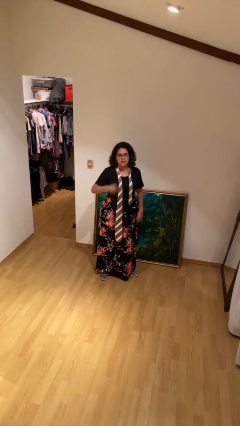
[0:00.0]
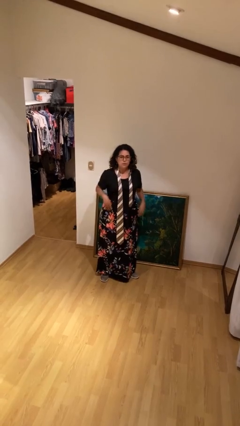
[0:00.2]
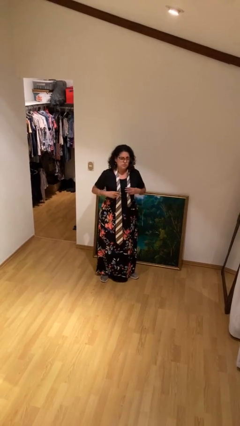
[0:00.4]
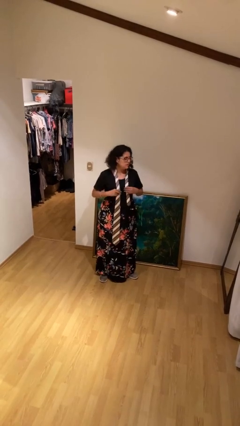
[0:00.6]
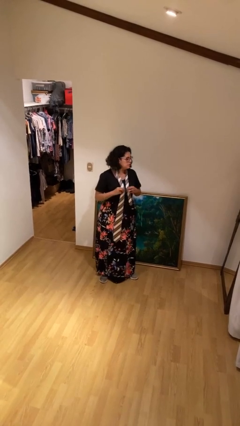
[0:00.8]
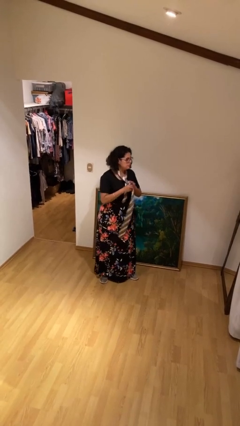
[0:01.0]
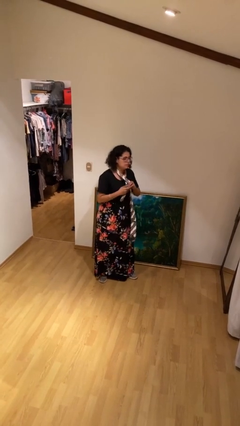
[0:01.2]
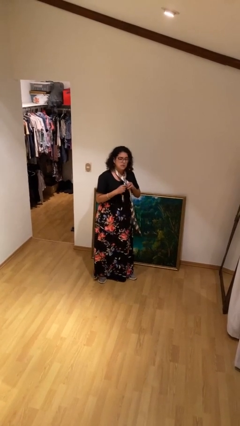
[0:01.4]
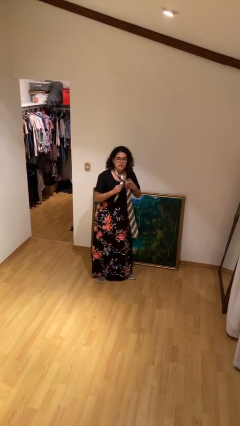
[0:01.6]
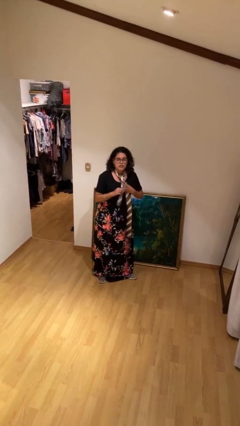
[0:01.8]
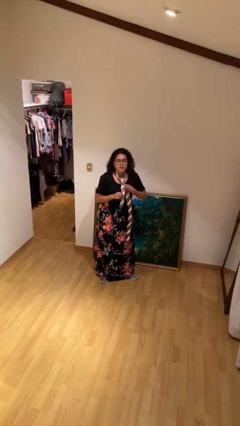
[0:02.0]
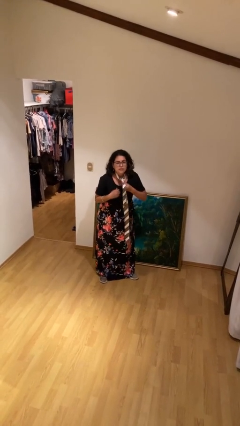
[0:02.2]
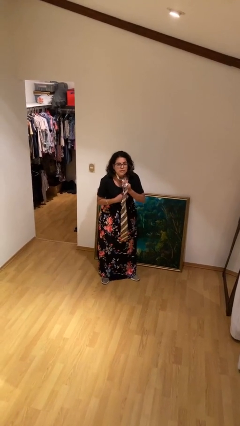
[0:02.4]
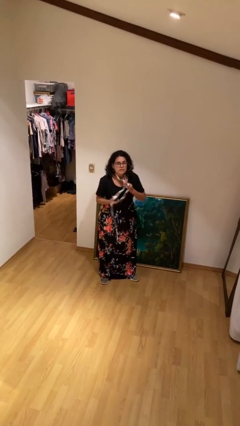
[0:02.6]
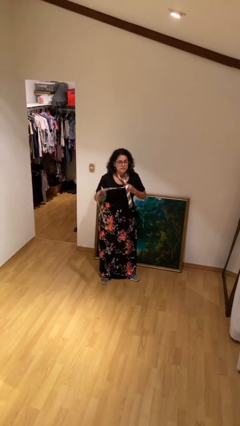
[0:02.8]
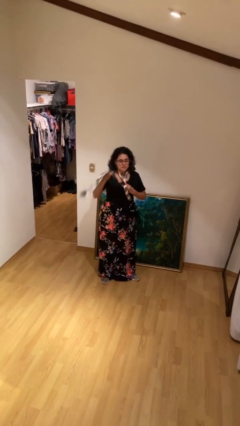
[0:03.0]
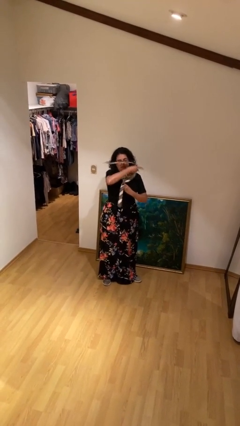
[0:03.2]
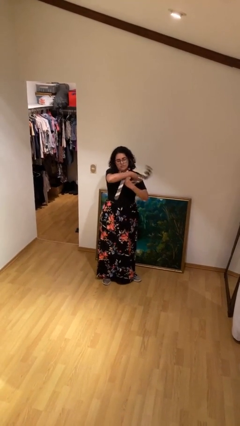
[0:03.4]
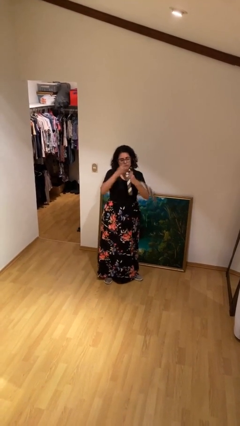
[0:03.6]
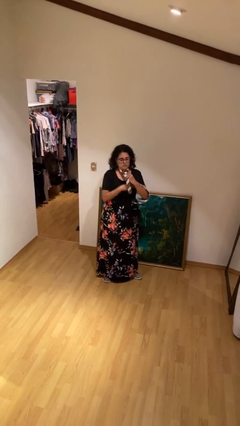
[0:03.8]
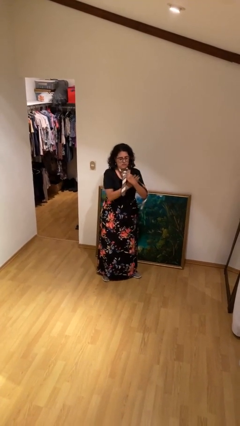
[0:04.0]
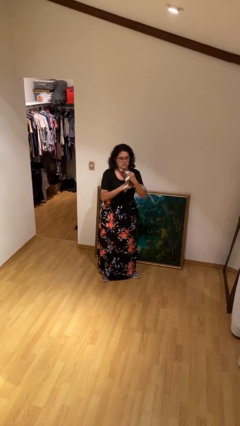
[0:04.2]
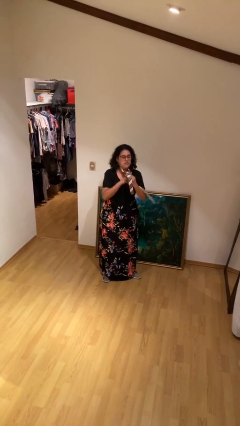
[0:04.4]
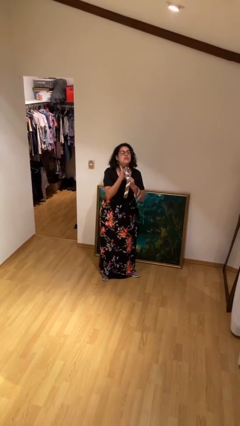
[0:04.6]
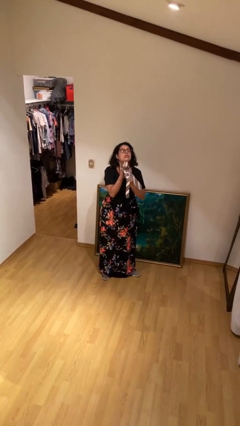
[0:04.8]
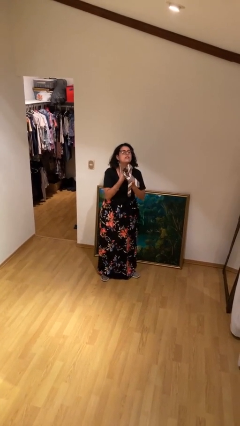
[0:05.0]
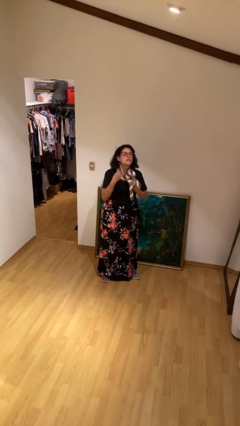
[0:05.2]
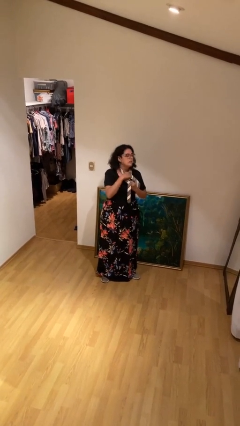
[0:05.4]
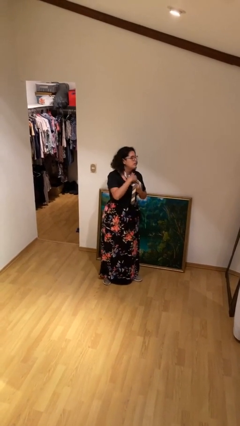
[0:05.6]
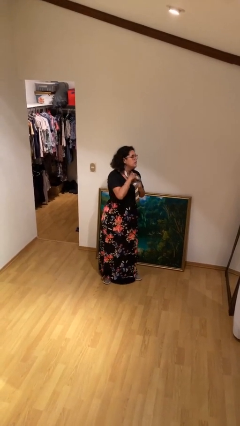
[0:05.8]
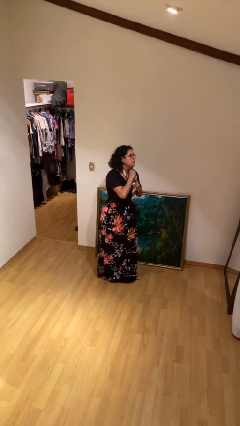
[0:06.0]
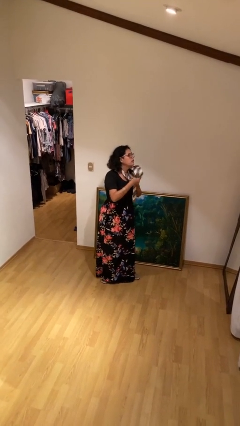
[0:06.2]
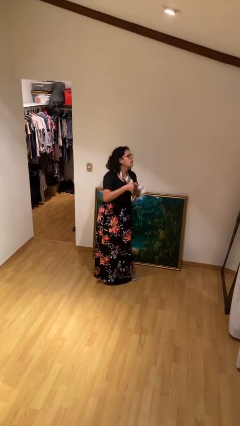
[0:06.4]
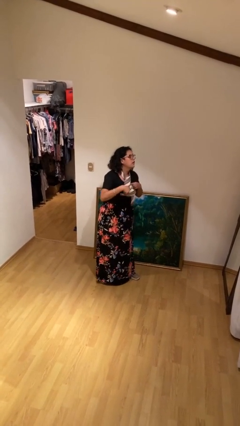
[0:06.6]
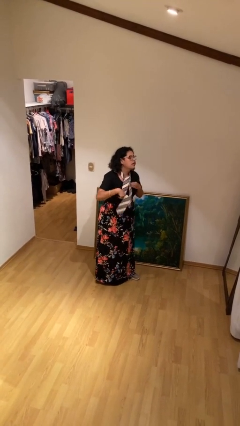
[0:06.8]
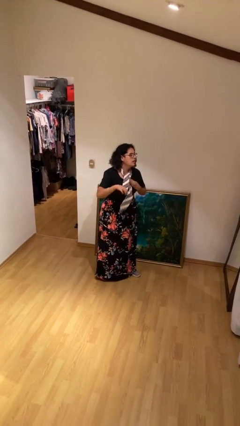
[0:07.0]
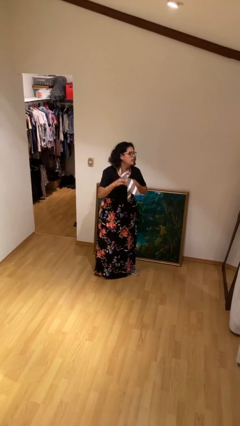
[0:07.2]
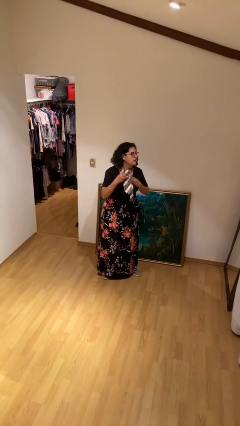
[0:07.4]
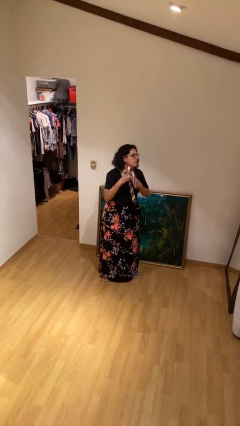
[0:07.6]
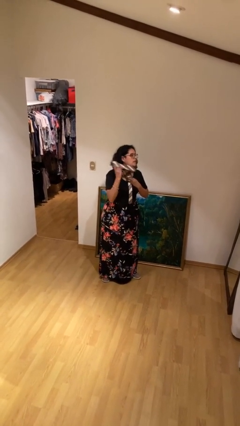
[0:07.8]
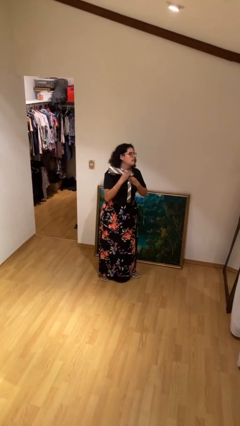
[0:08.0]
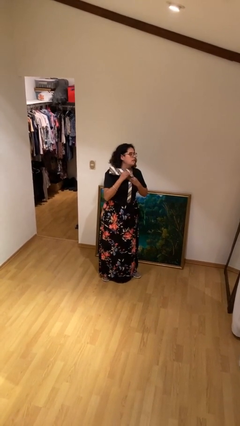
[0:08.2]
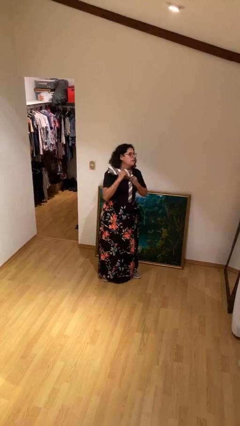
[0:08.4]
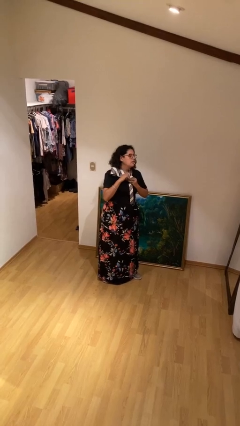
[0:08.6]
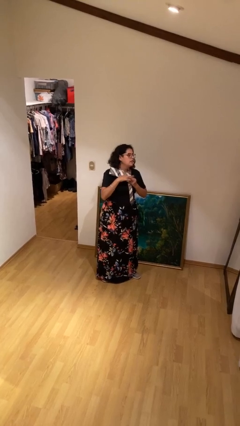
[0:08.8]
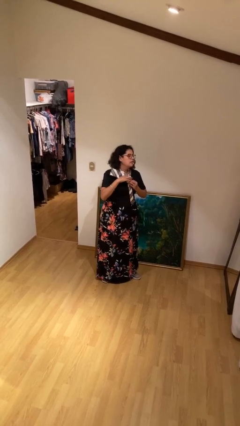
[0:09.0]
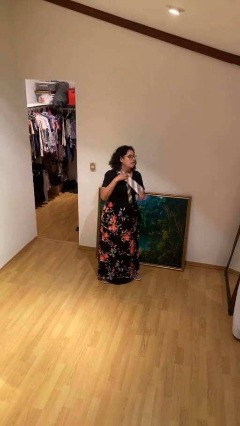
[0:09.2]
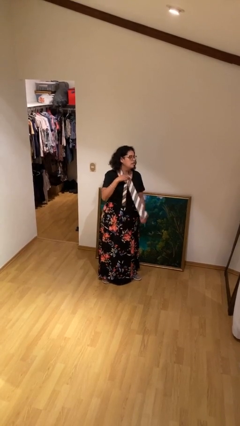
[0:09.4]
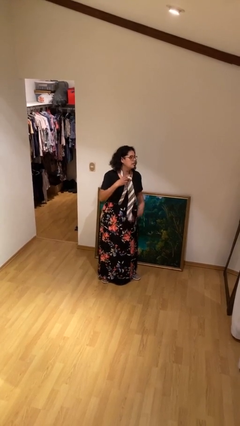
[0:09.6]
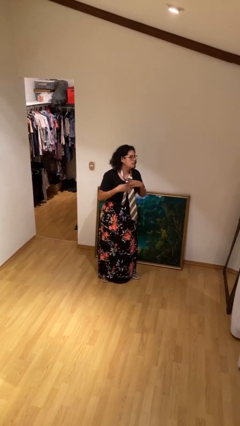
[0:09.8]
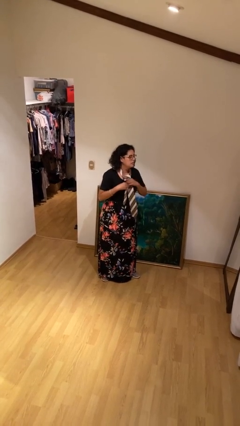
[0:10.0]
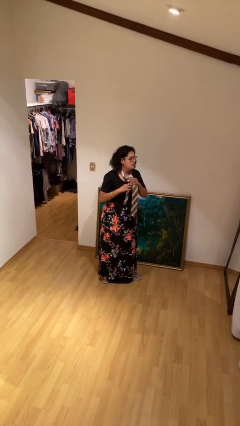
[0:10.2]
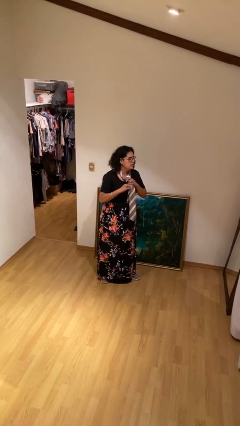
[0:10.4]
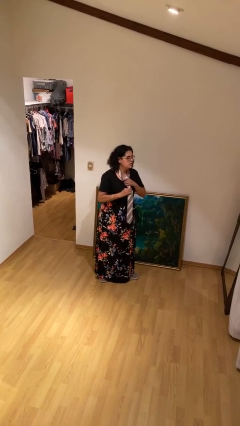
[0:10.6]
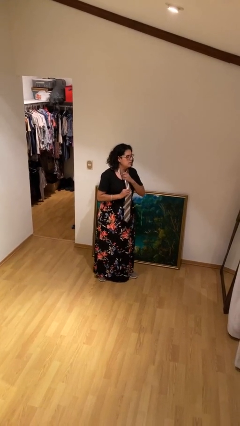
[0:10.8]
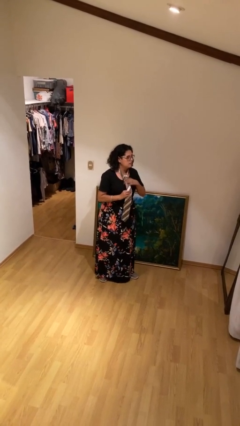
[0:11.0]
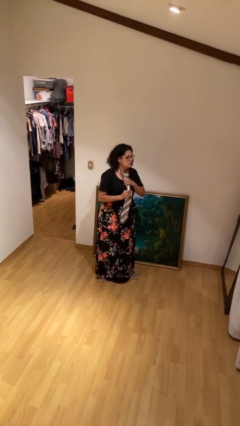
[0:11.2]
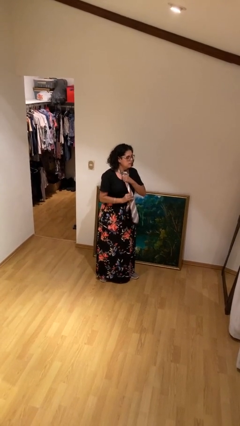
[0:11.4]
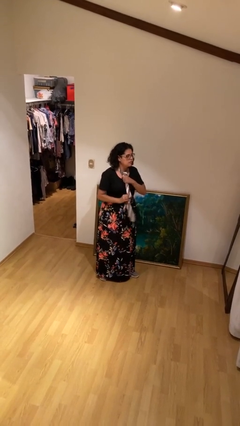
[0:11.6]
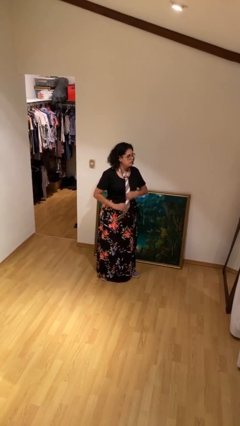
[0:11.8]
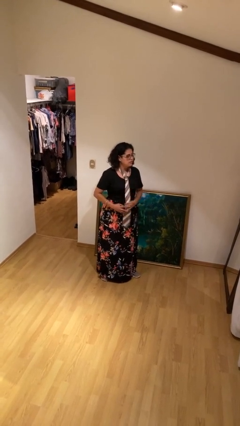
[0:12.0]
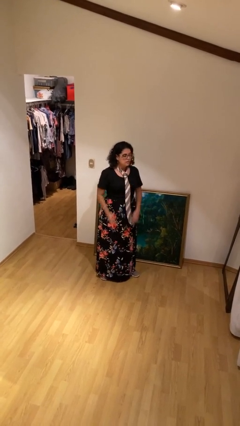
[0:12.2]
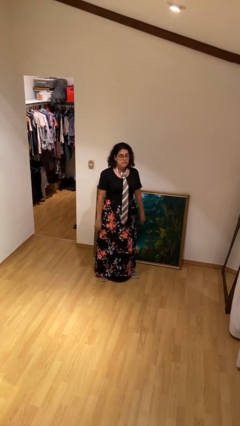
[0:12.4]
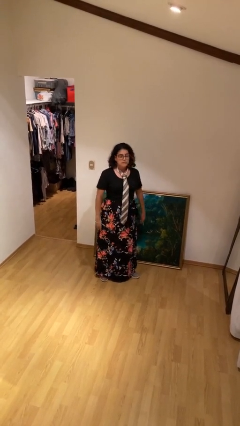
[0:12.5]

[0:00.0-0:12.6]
person puts on necktie

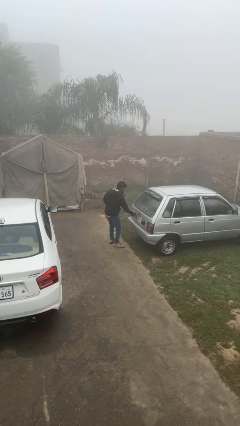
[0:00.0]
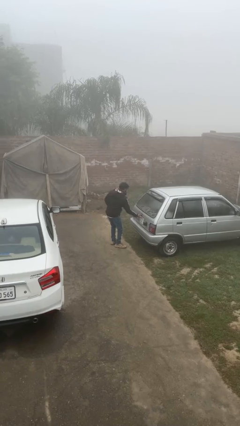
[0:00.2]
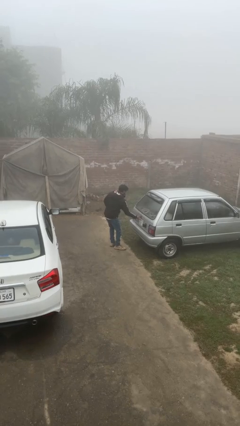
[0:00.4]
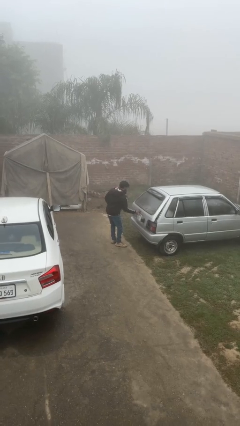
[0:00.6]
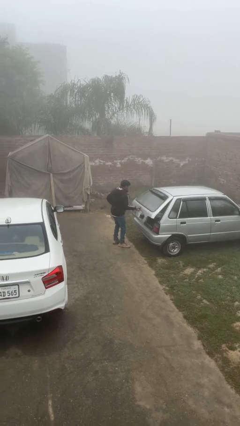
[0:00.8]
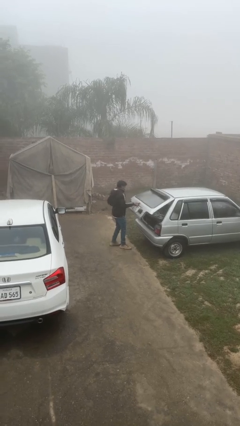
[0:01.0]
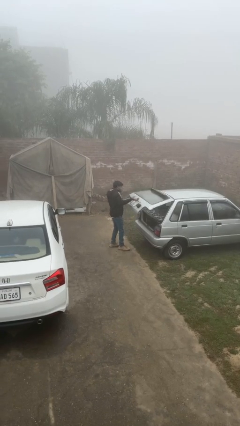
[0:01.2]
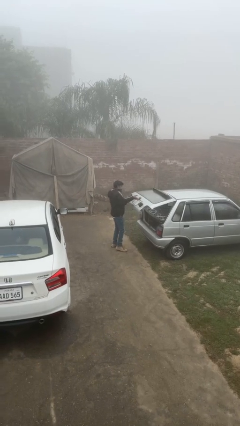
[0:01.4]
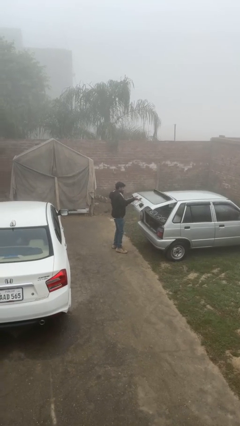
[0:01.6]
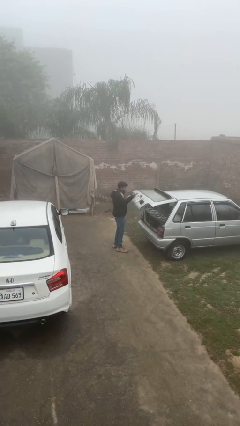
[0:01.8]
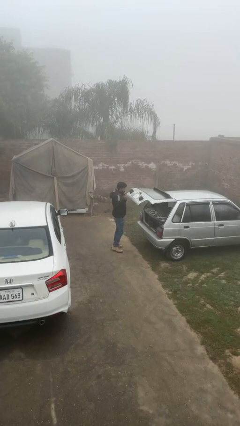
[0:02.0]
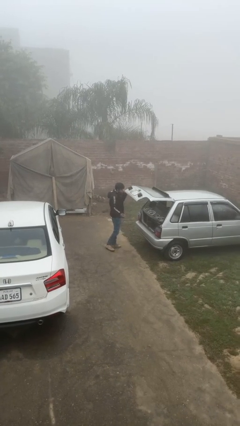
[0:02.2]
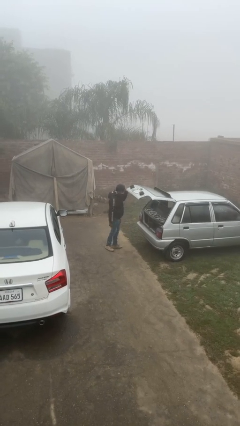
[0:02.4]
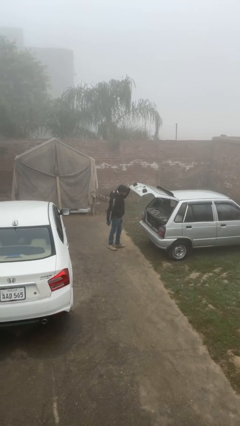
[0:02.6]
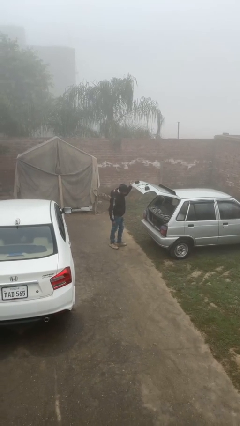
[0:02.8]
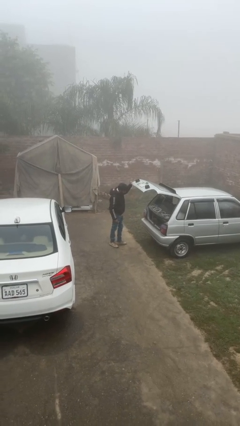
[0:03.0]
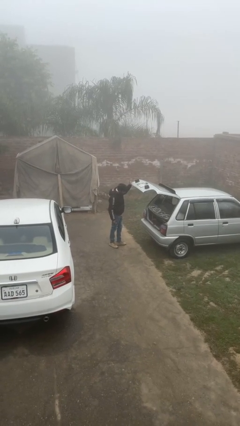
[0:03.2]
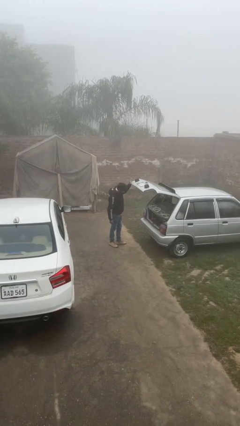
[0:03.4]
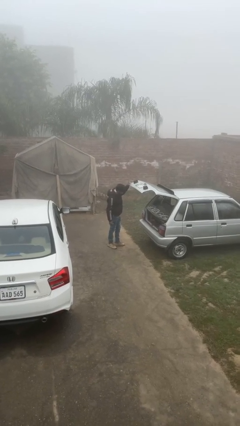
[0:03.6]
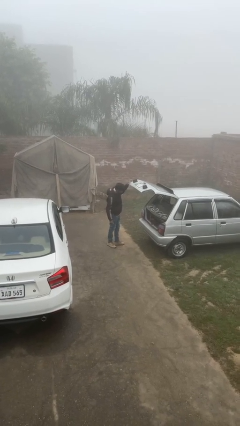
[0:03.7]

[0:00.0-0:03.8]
person opens car trunk

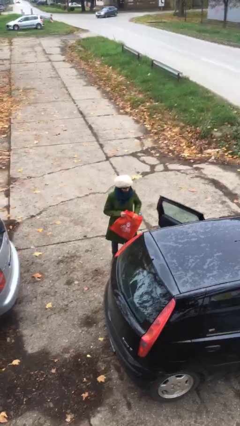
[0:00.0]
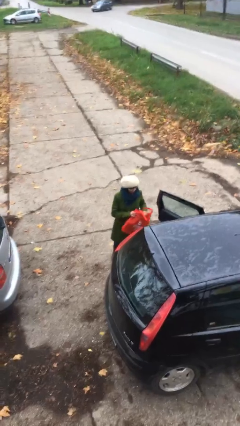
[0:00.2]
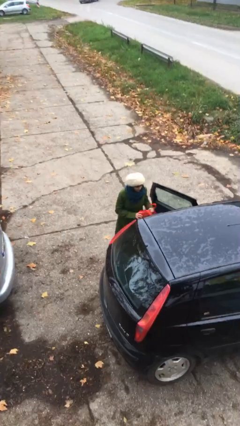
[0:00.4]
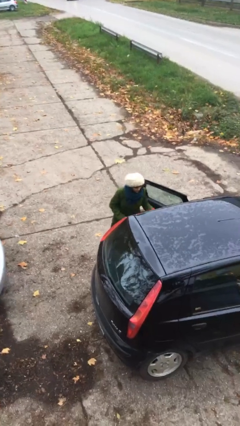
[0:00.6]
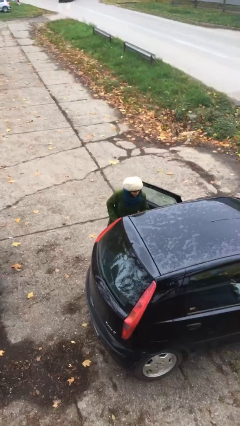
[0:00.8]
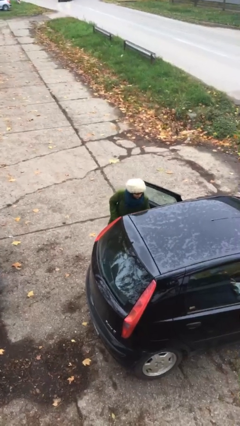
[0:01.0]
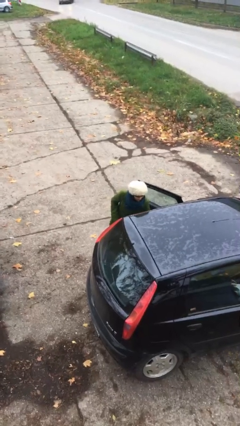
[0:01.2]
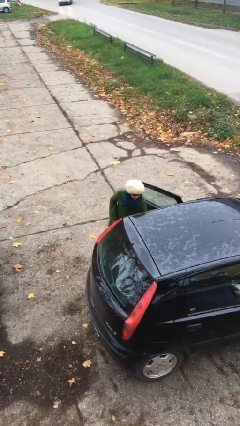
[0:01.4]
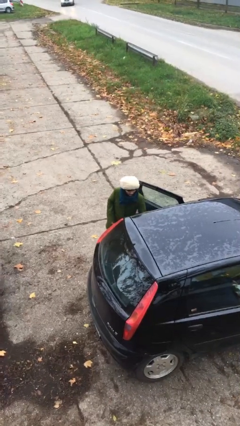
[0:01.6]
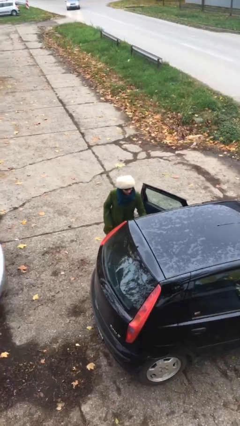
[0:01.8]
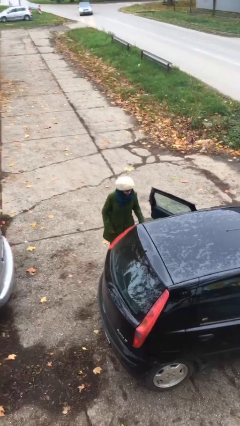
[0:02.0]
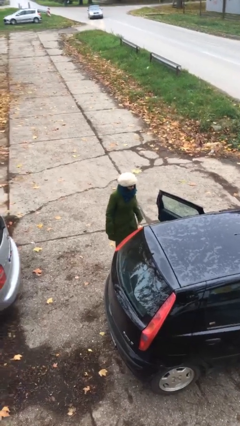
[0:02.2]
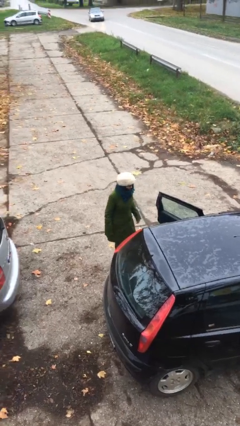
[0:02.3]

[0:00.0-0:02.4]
person loads car
